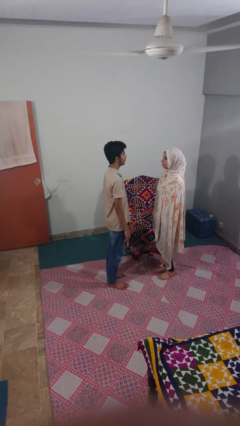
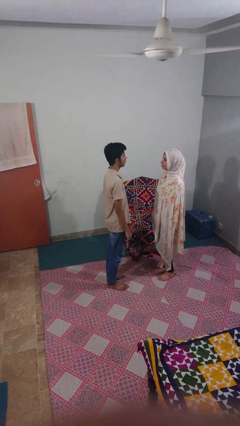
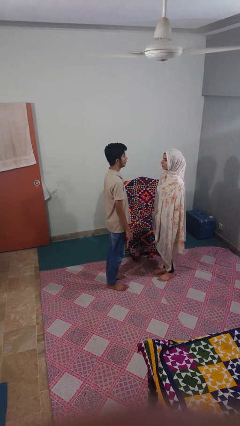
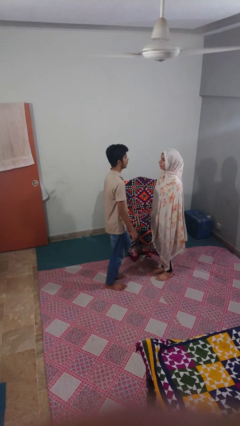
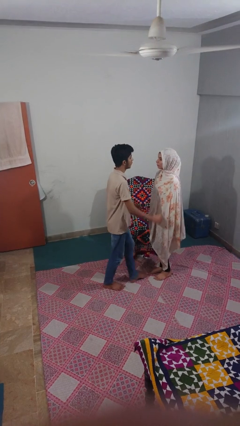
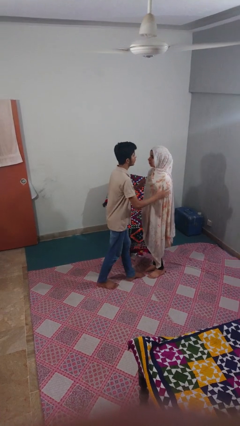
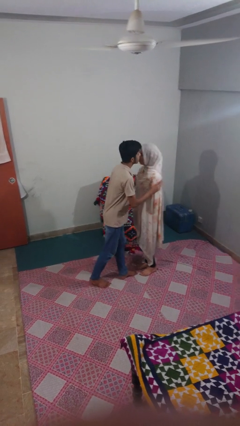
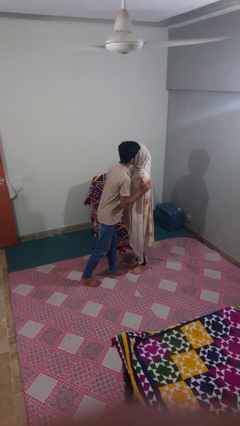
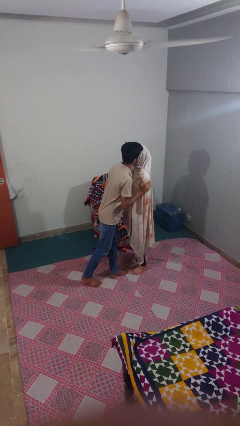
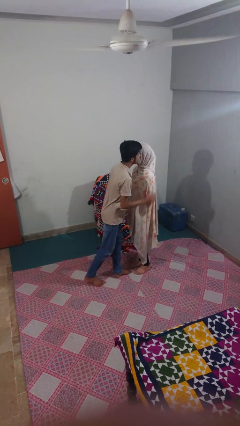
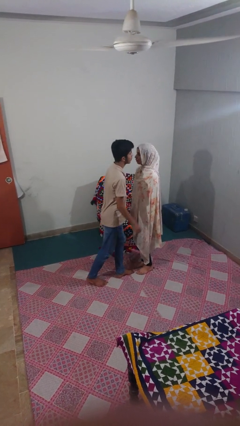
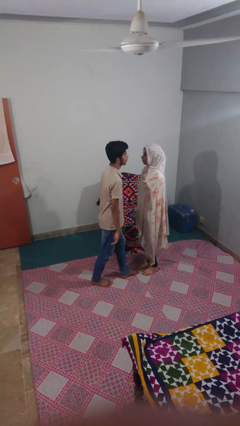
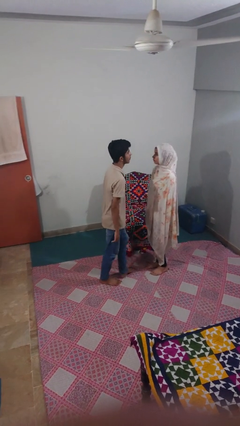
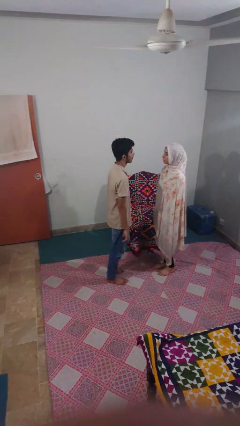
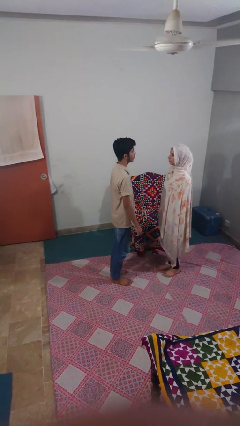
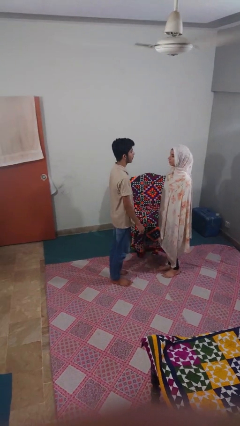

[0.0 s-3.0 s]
person kisses cheek of person

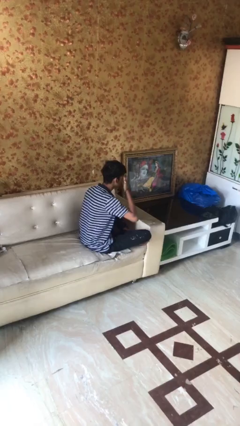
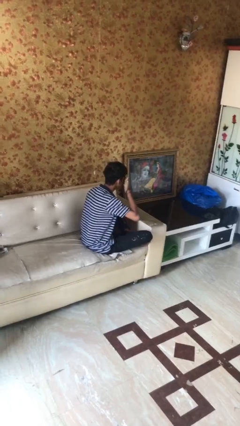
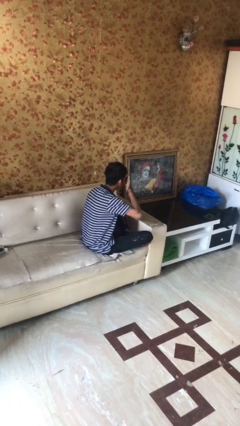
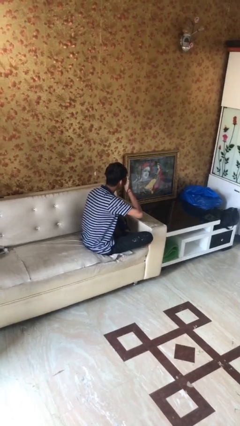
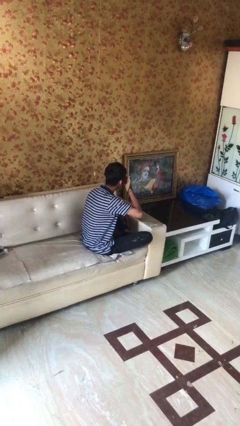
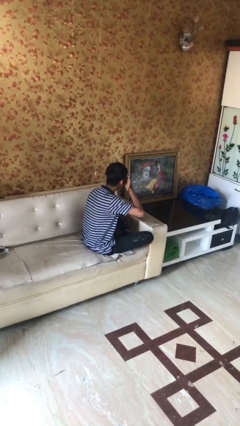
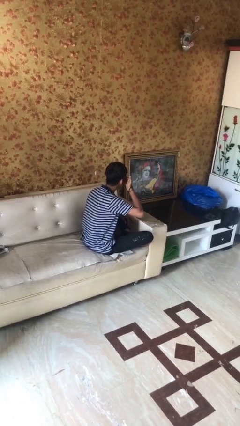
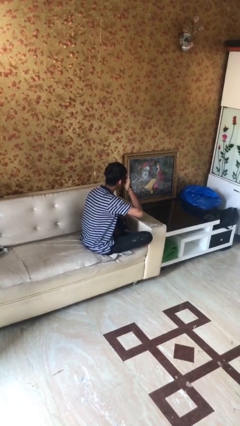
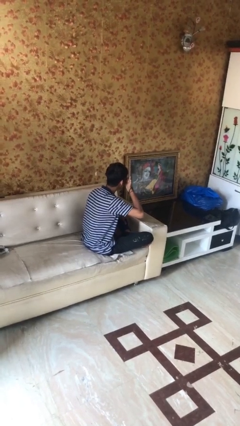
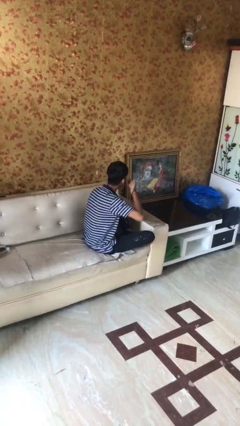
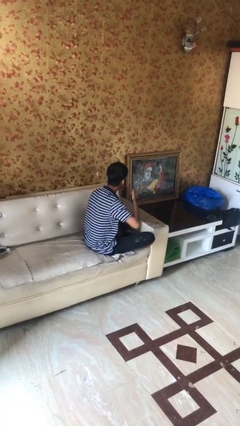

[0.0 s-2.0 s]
person rubs eyes

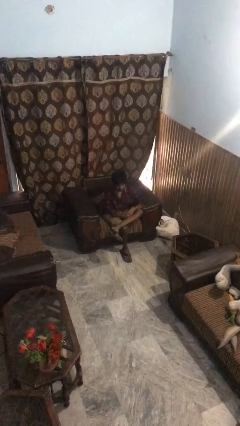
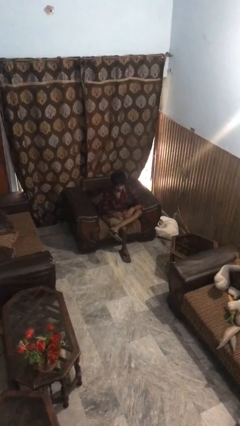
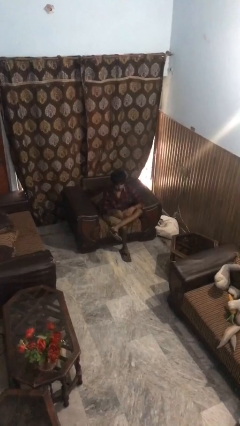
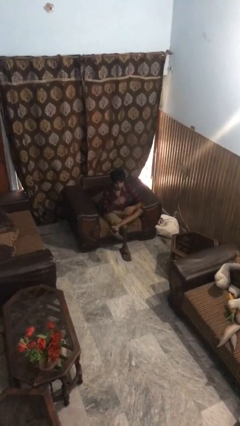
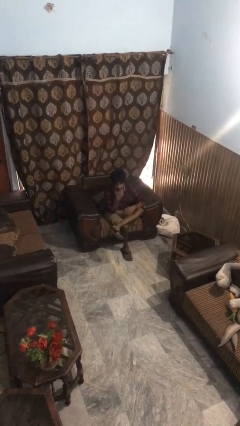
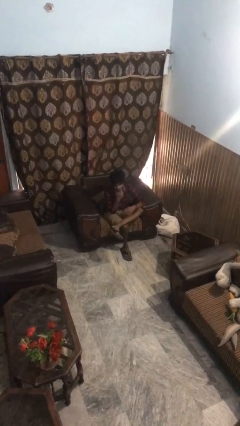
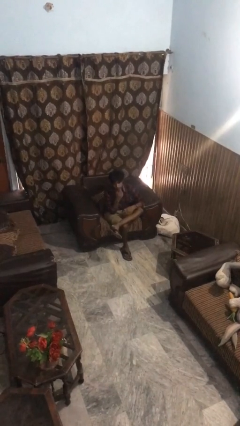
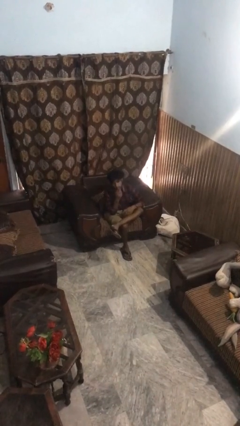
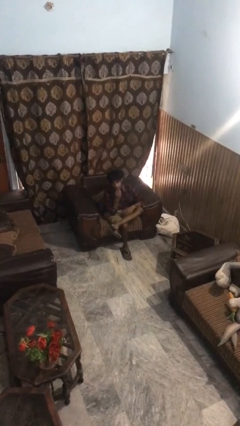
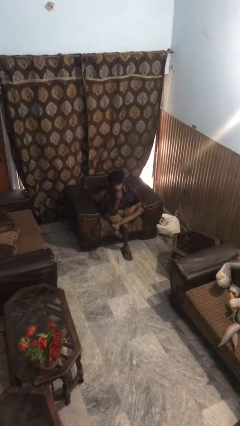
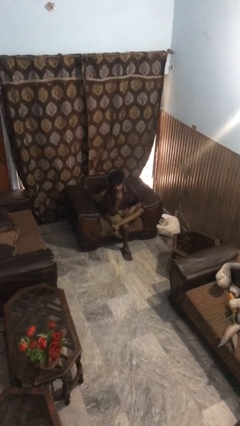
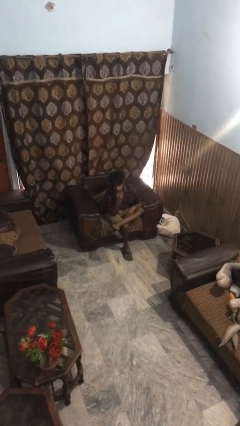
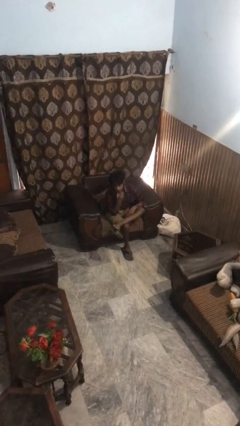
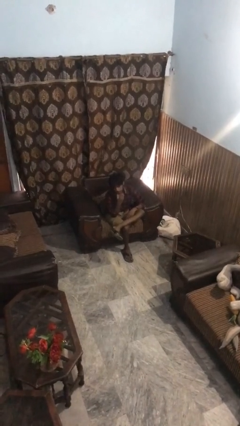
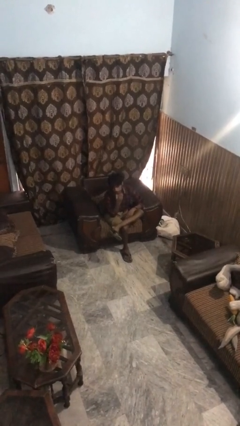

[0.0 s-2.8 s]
person strokes chin

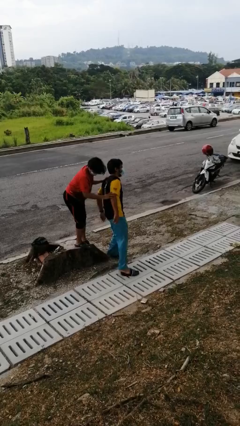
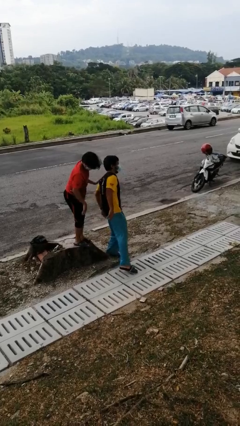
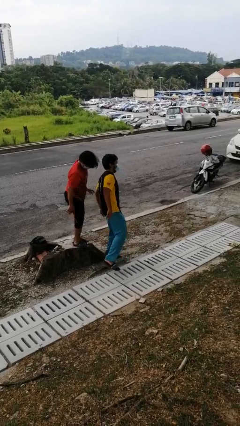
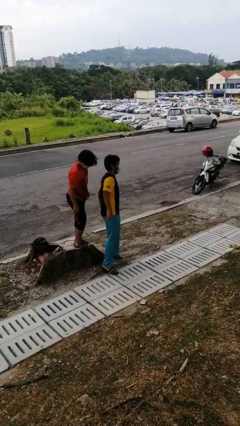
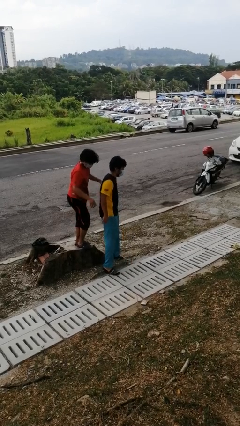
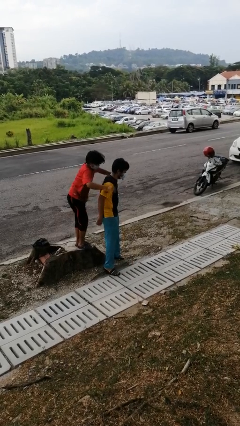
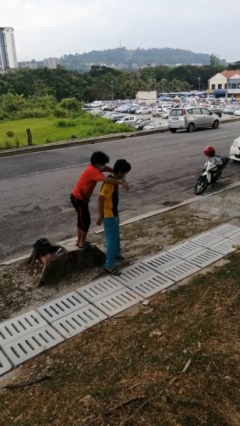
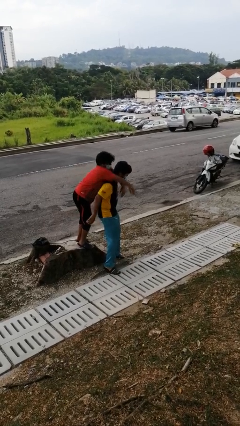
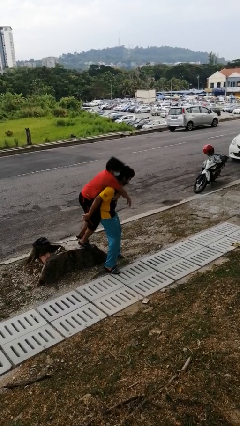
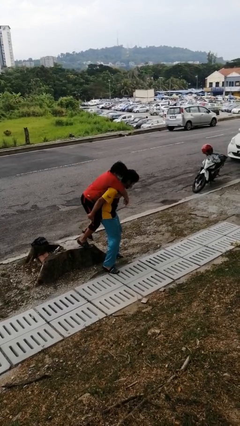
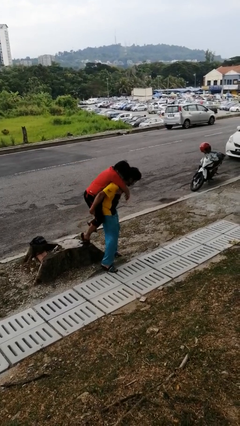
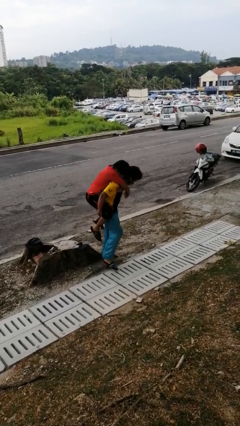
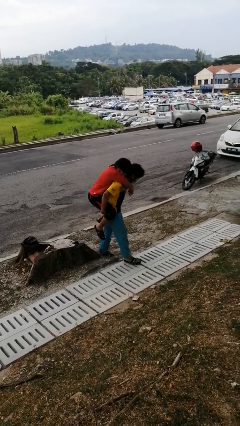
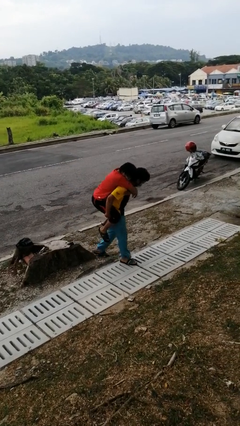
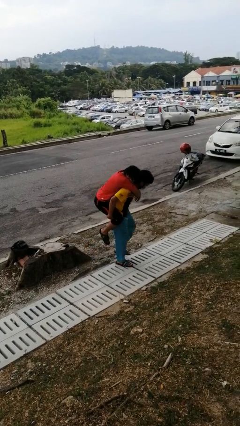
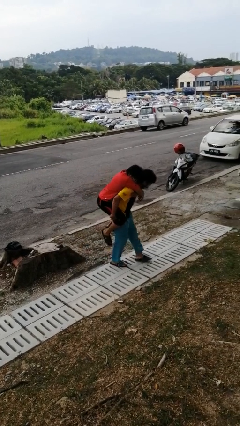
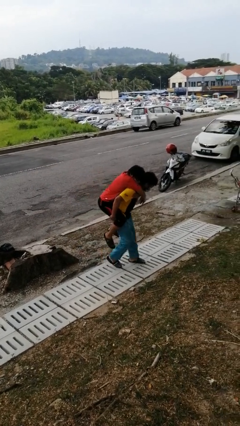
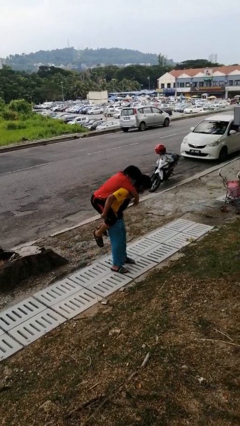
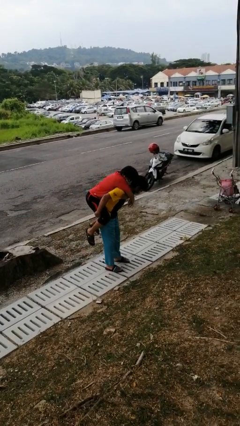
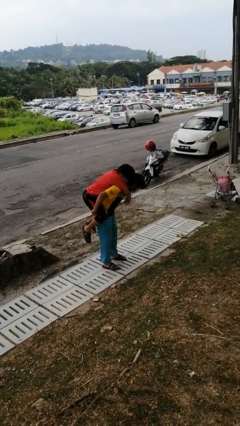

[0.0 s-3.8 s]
person carries person over shoulder

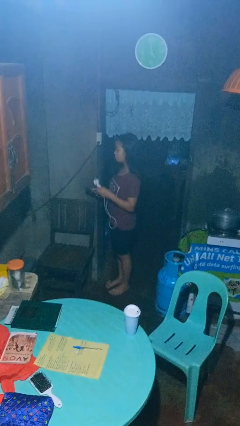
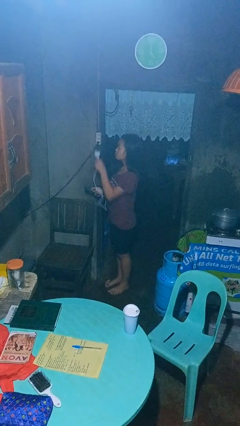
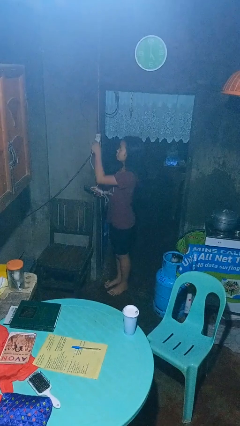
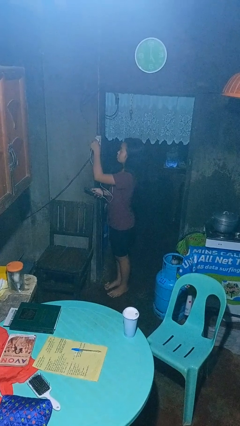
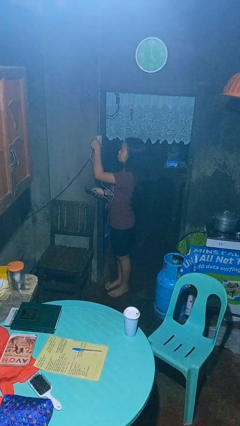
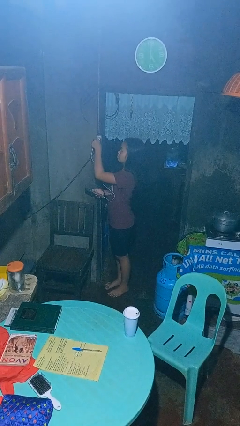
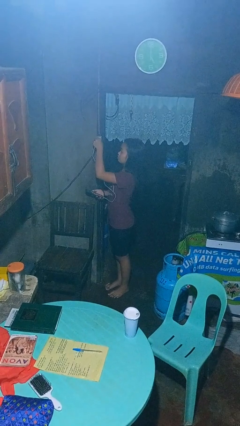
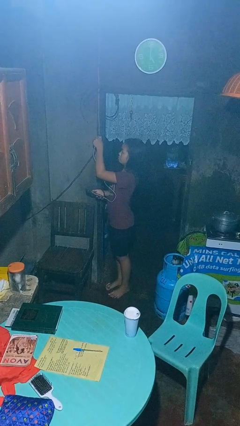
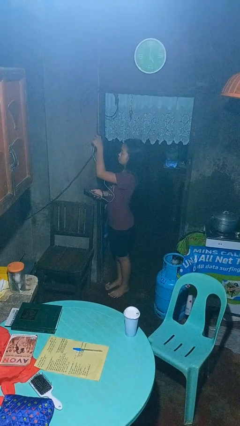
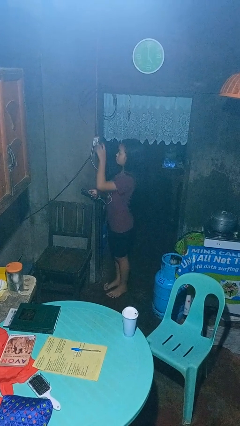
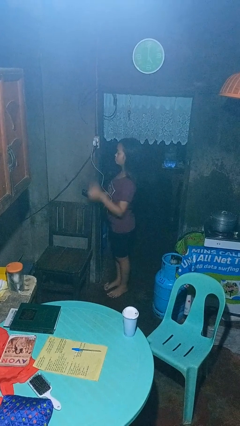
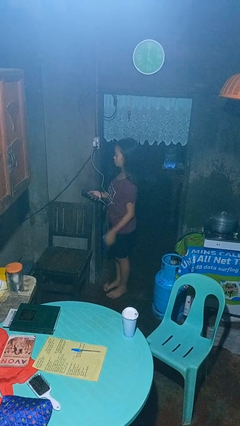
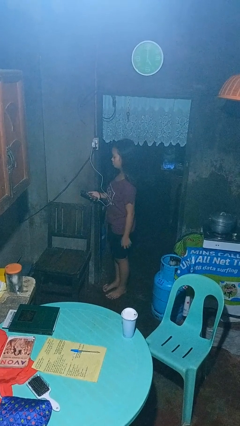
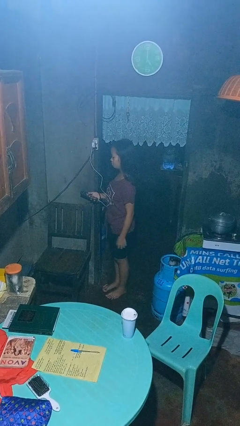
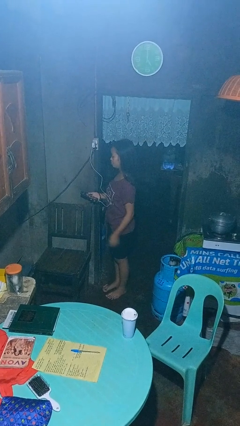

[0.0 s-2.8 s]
person plugs into electrical socket

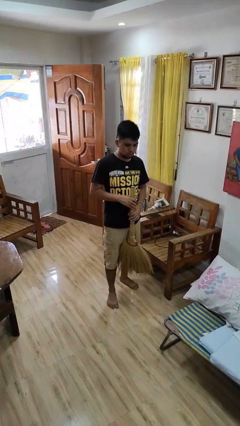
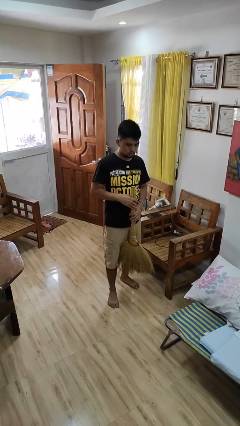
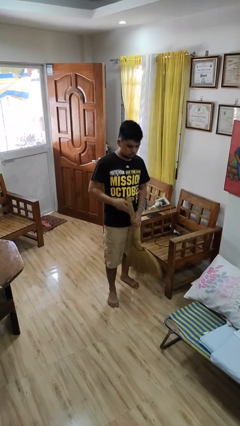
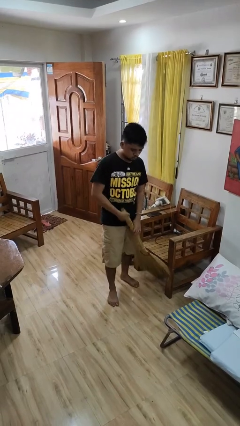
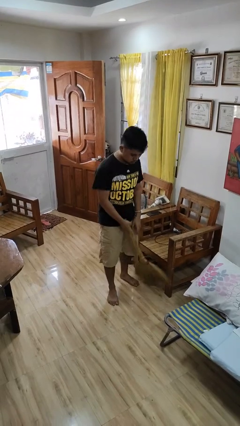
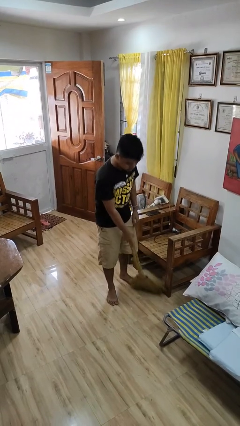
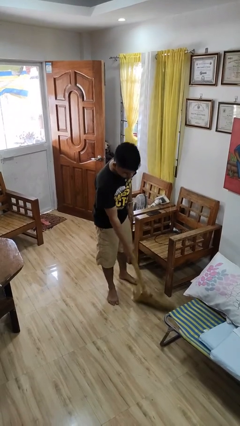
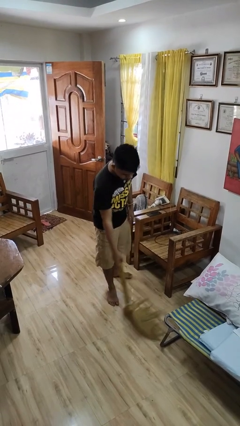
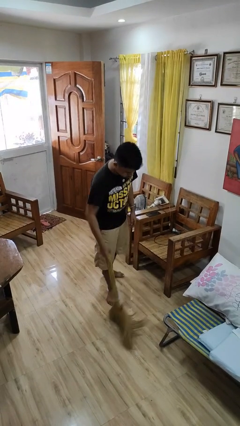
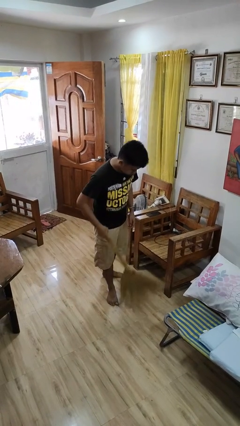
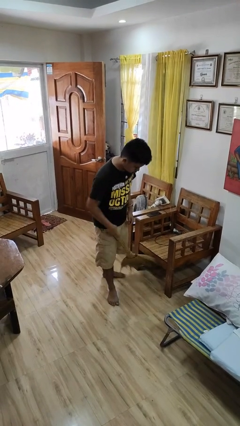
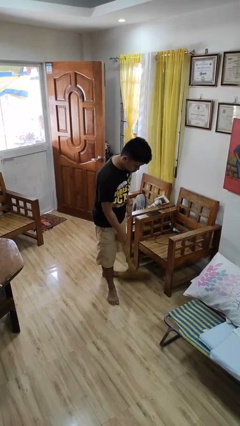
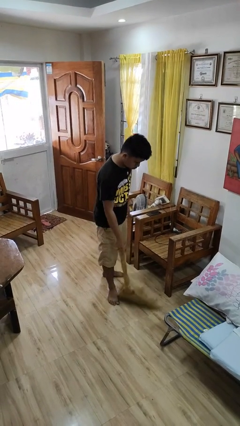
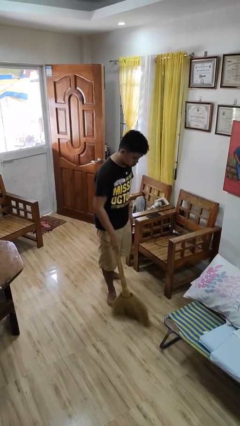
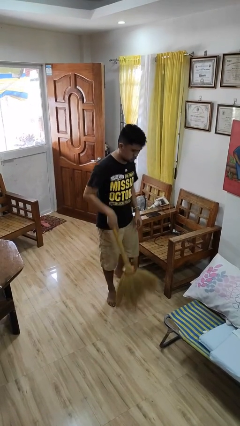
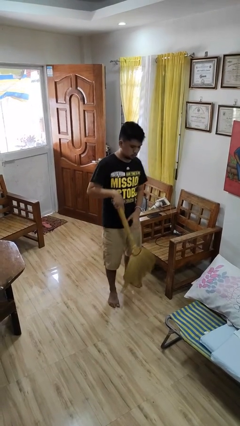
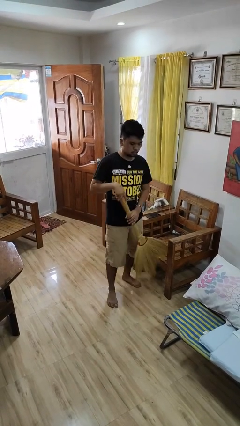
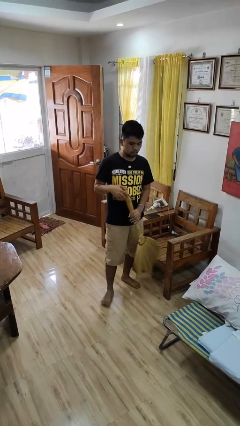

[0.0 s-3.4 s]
person sweeps floor
